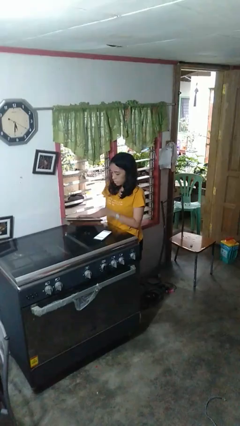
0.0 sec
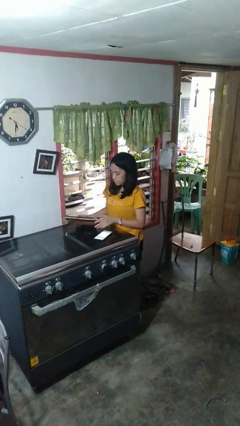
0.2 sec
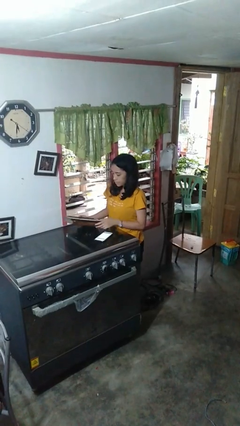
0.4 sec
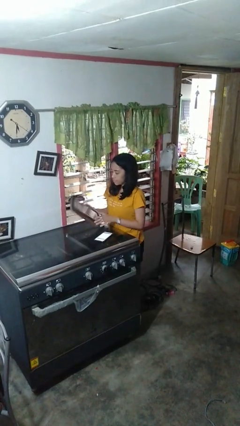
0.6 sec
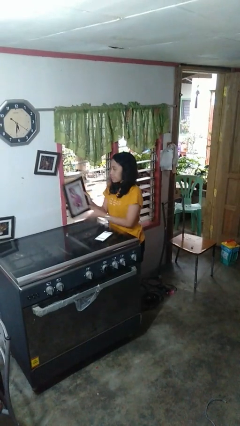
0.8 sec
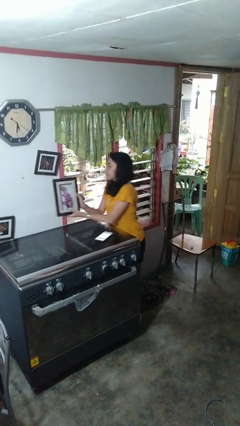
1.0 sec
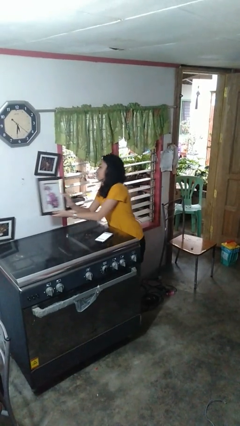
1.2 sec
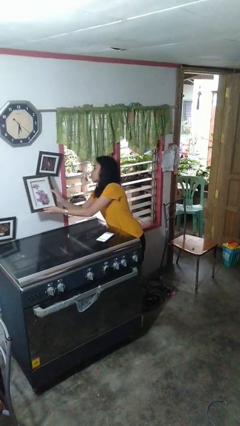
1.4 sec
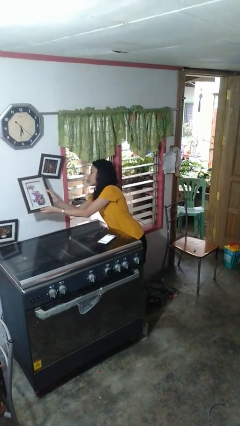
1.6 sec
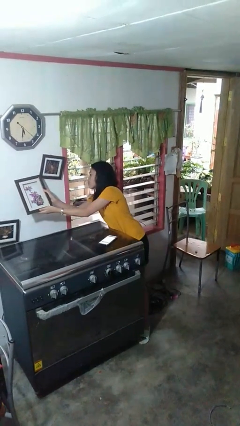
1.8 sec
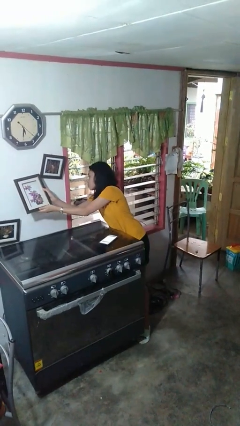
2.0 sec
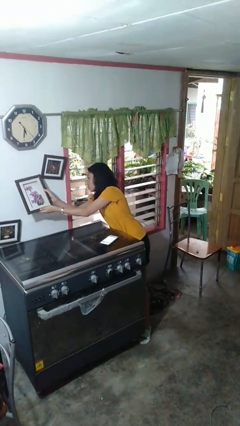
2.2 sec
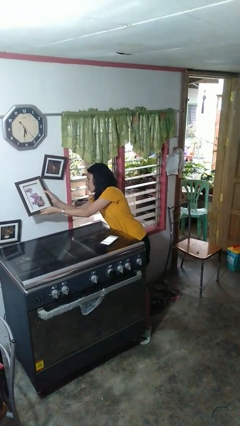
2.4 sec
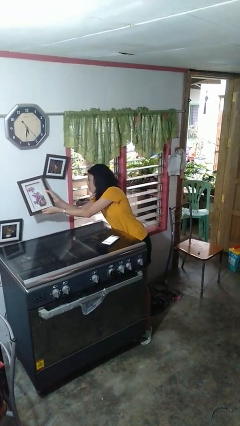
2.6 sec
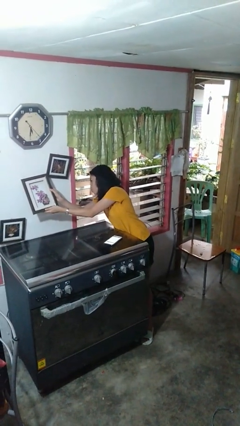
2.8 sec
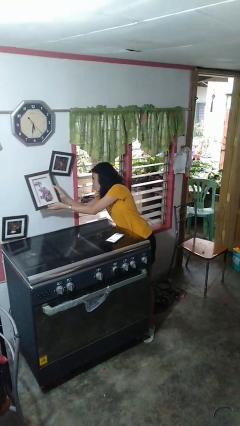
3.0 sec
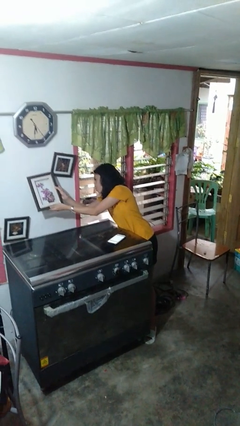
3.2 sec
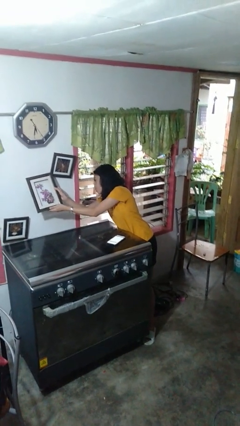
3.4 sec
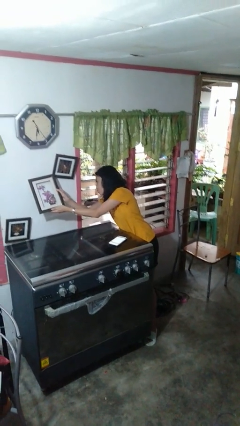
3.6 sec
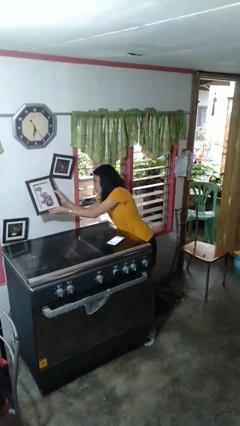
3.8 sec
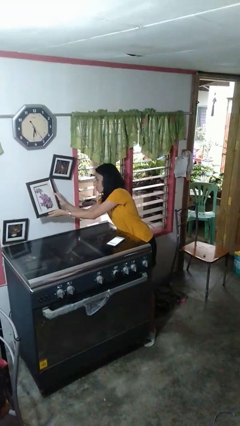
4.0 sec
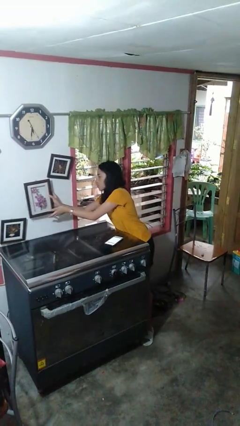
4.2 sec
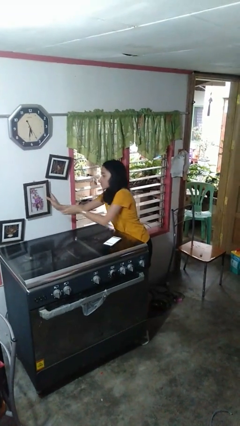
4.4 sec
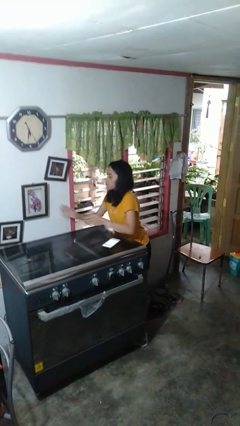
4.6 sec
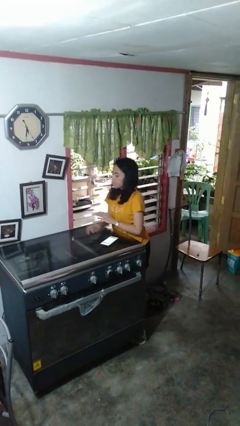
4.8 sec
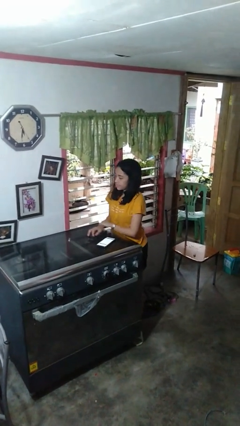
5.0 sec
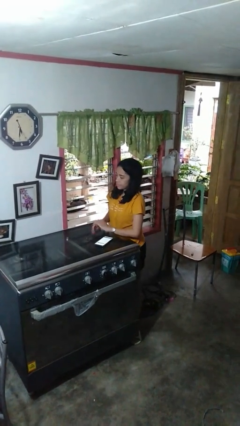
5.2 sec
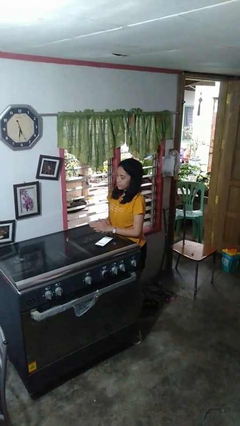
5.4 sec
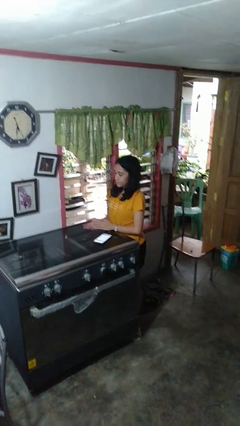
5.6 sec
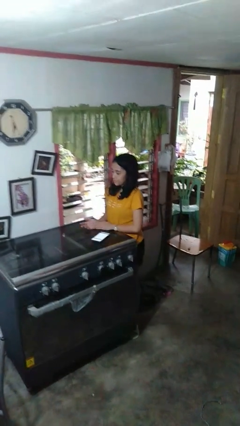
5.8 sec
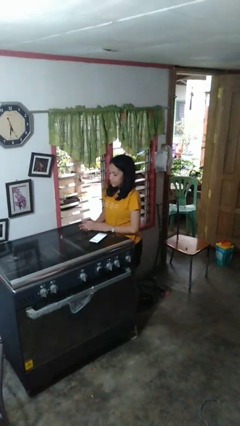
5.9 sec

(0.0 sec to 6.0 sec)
person puts up picture frame

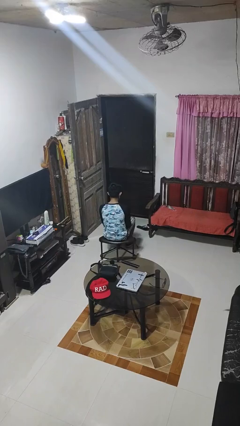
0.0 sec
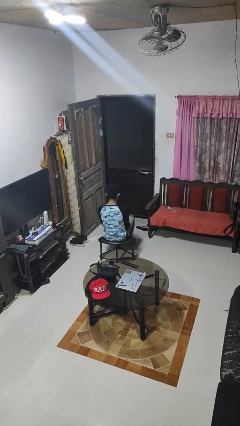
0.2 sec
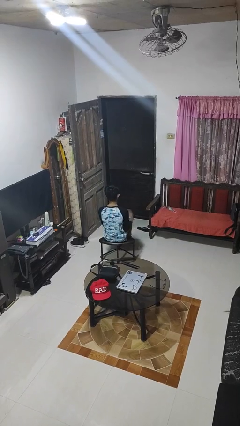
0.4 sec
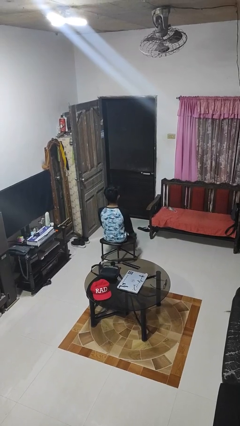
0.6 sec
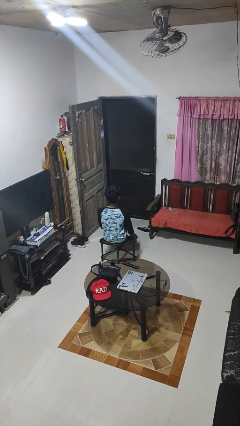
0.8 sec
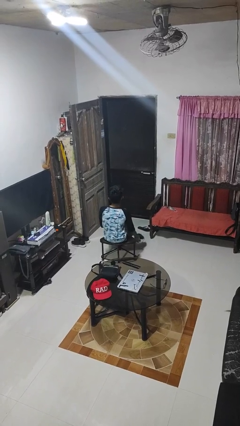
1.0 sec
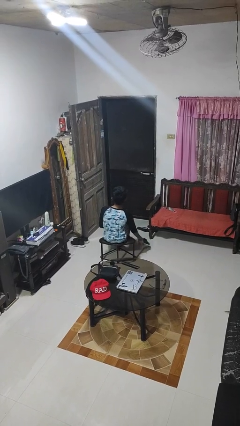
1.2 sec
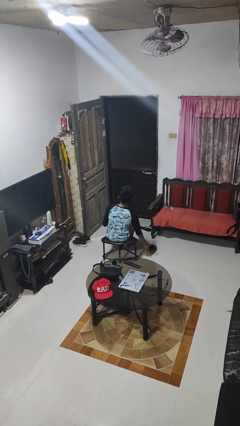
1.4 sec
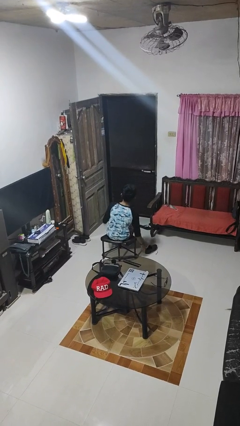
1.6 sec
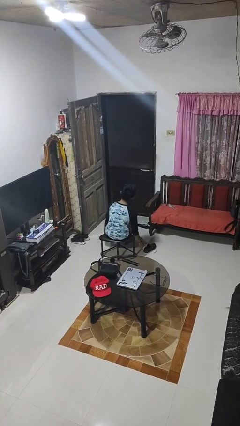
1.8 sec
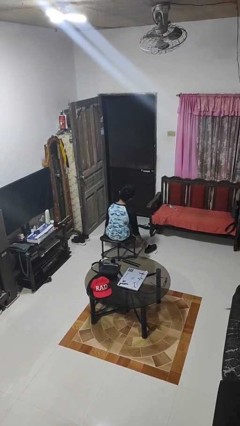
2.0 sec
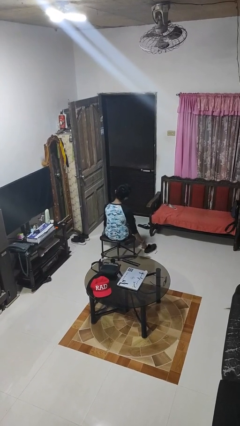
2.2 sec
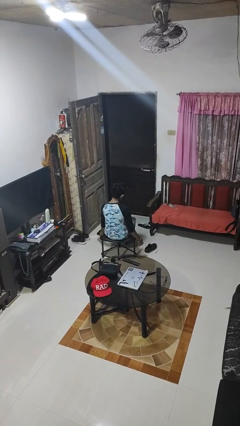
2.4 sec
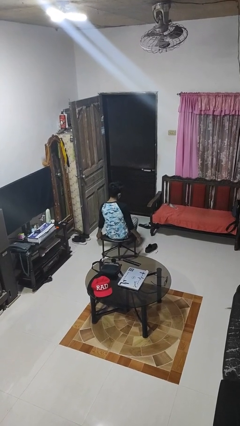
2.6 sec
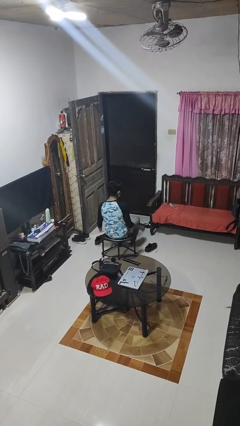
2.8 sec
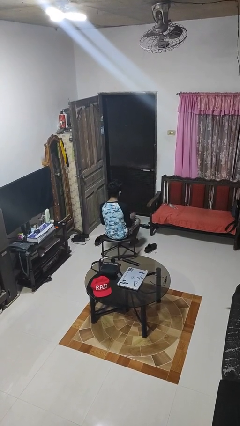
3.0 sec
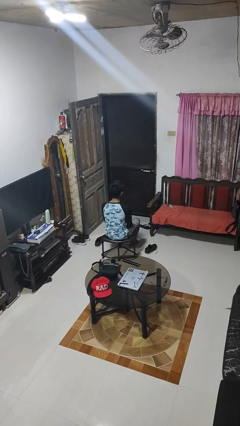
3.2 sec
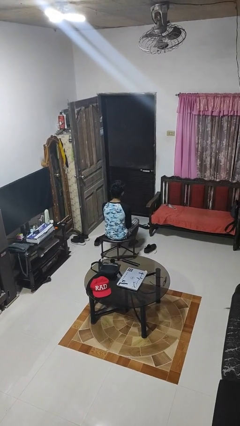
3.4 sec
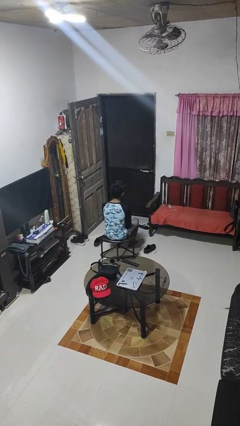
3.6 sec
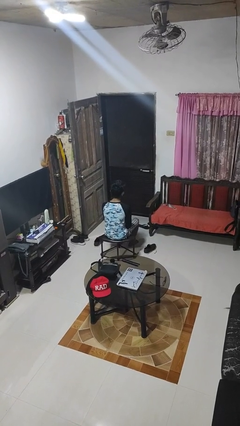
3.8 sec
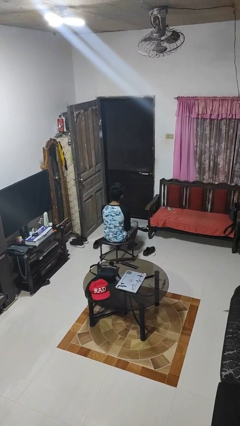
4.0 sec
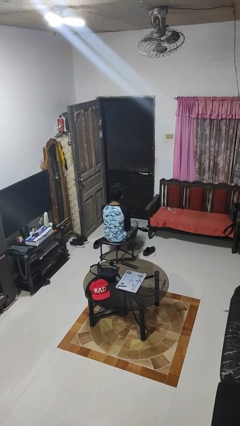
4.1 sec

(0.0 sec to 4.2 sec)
person takes off gloves

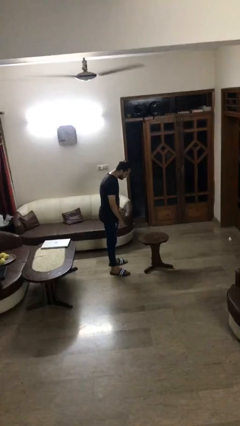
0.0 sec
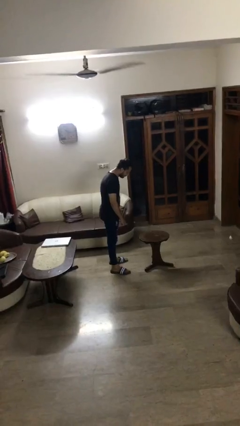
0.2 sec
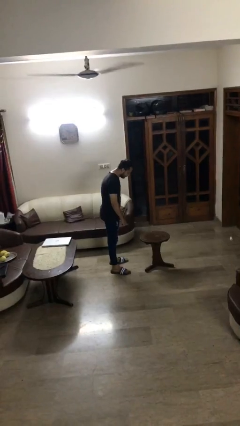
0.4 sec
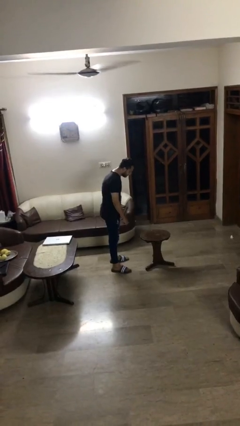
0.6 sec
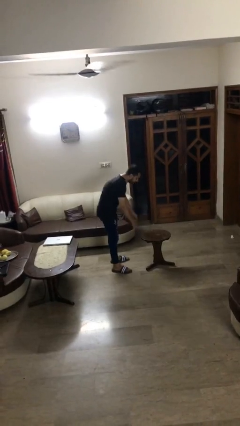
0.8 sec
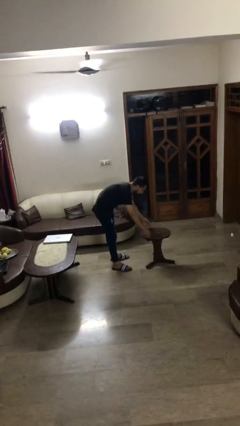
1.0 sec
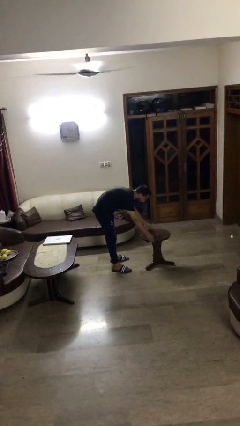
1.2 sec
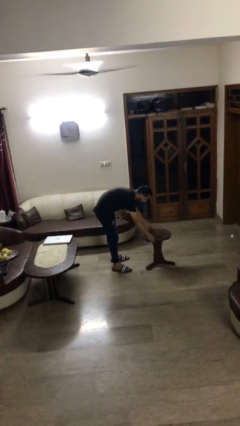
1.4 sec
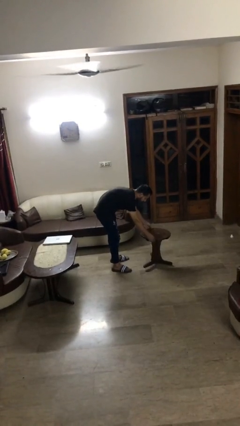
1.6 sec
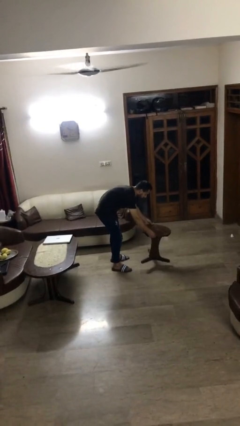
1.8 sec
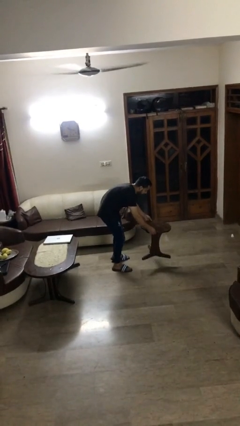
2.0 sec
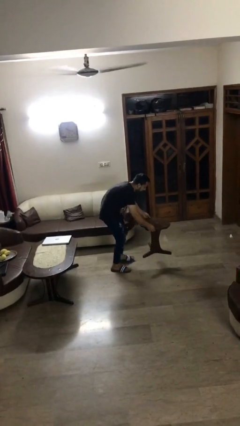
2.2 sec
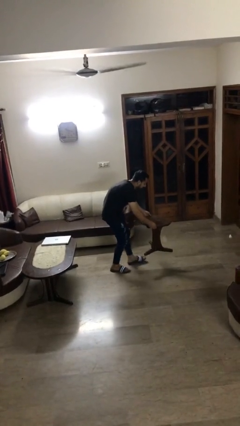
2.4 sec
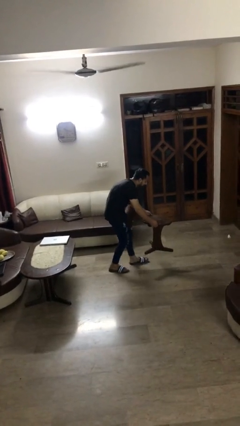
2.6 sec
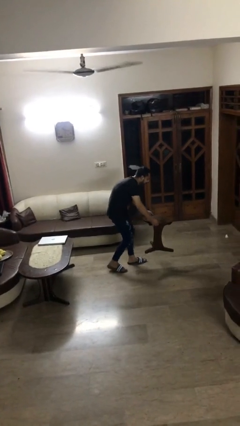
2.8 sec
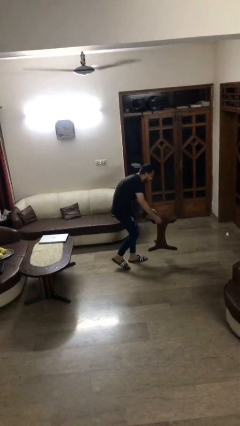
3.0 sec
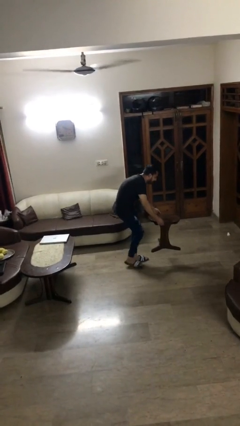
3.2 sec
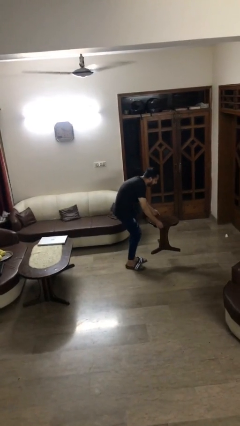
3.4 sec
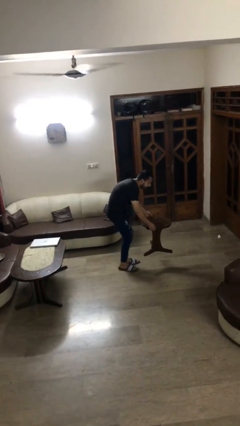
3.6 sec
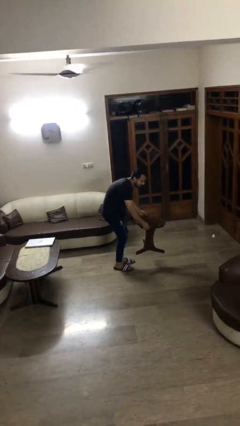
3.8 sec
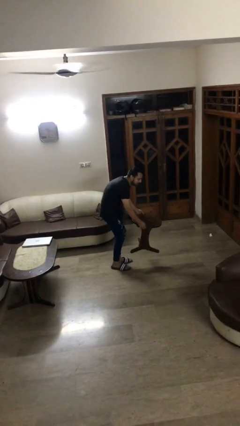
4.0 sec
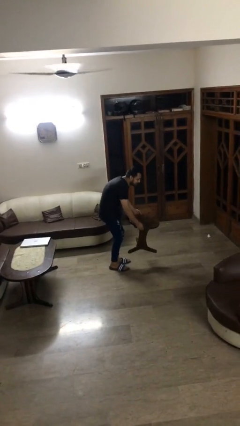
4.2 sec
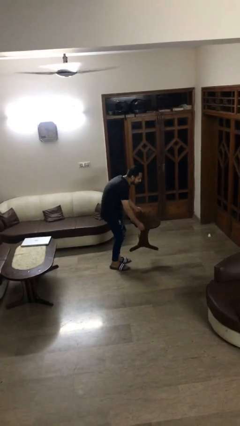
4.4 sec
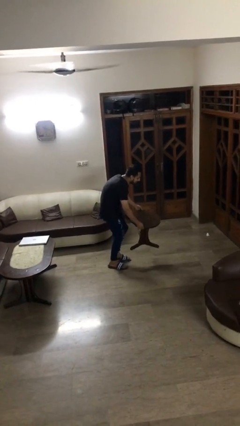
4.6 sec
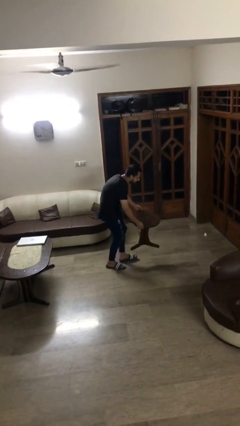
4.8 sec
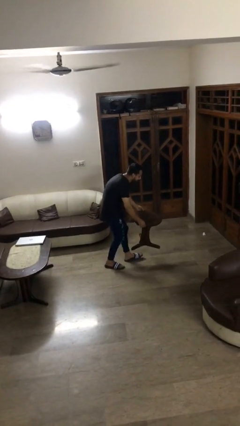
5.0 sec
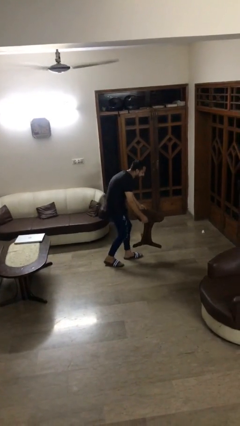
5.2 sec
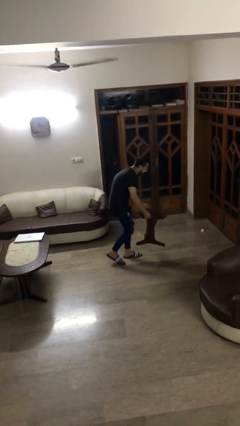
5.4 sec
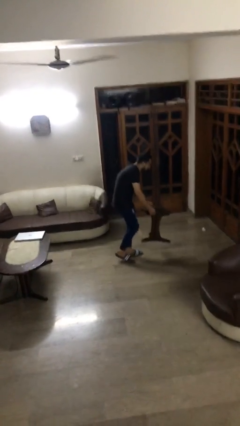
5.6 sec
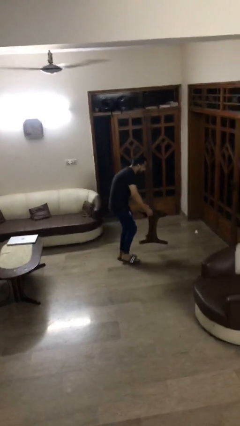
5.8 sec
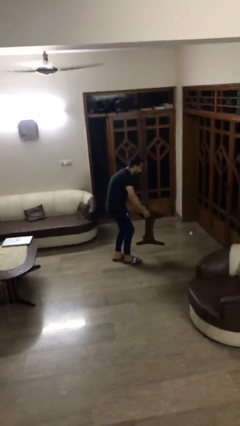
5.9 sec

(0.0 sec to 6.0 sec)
person carries heavy object

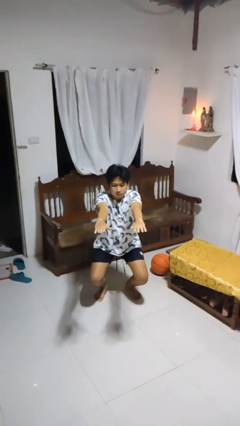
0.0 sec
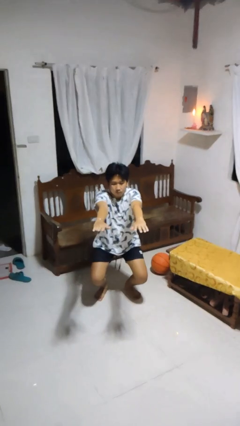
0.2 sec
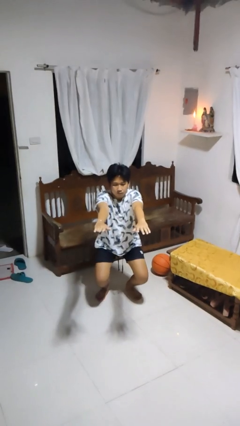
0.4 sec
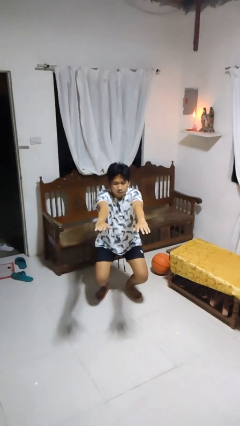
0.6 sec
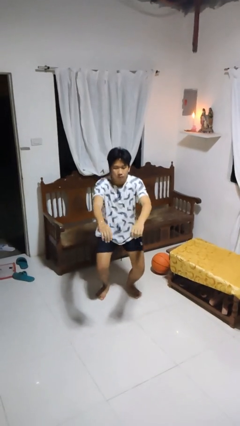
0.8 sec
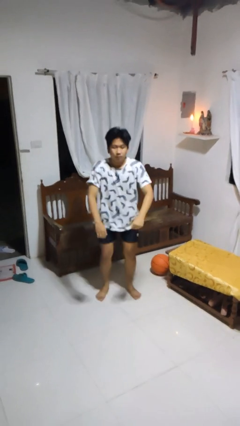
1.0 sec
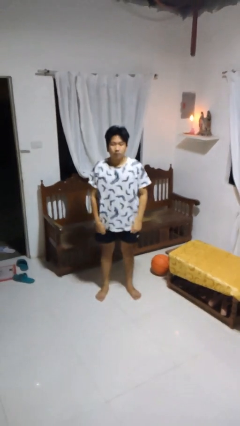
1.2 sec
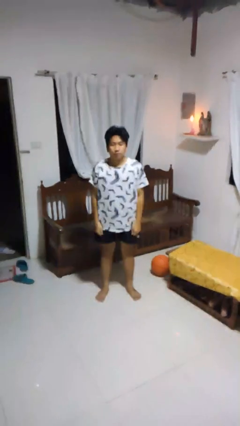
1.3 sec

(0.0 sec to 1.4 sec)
person stands up

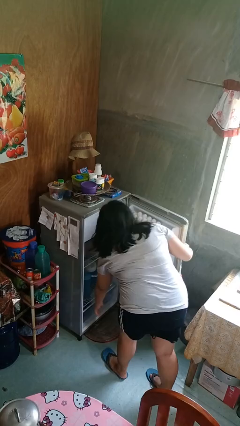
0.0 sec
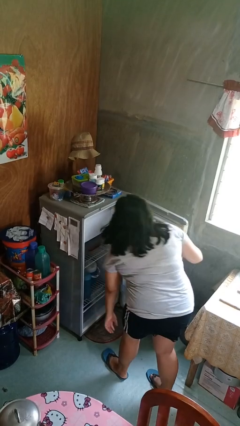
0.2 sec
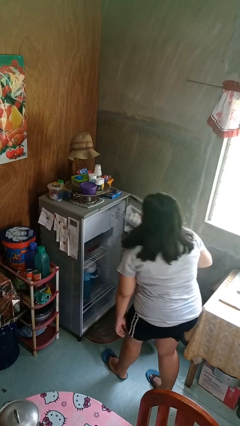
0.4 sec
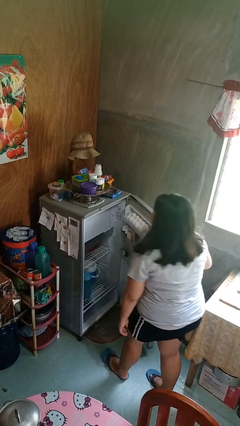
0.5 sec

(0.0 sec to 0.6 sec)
person closes refrigerator
